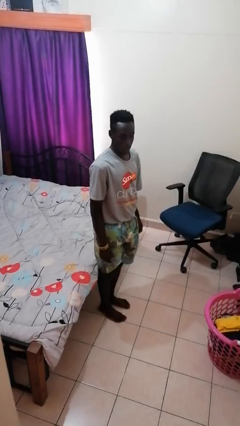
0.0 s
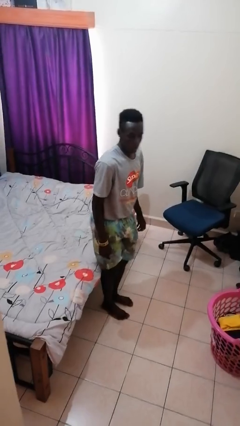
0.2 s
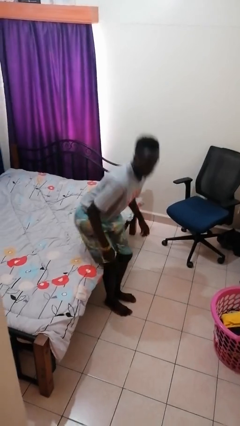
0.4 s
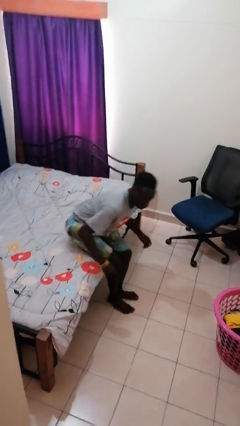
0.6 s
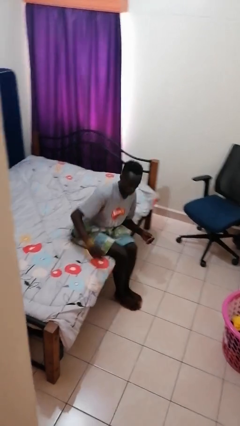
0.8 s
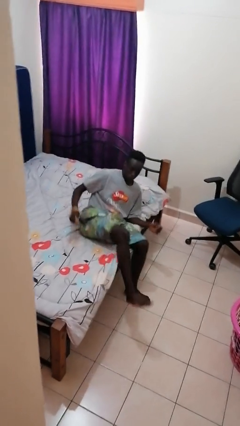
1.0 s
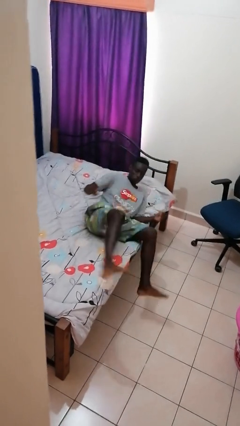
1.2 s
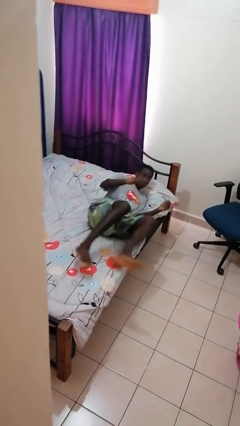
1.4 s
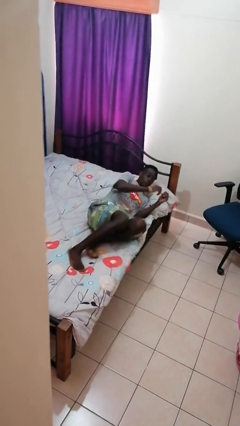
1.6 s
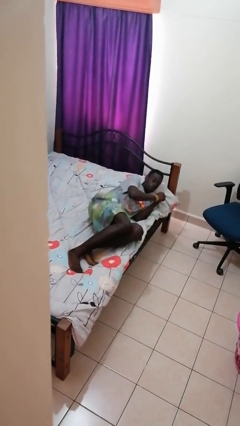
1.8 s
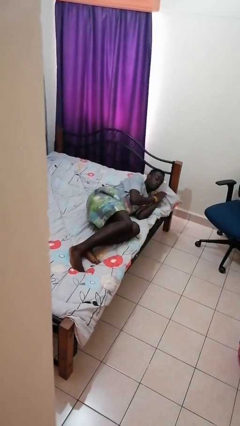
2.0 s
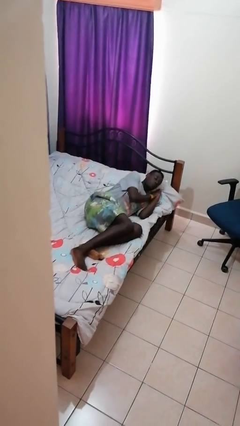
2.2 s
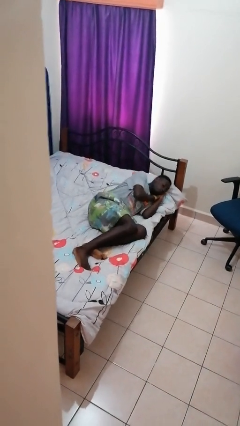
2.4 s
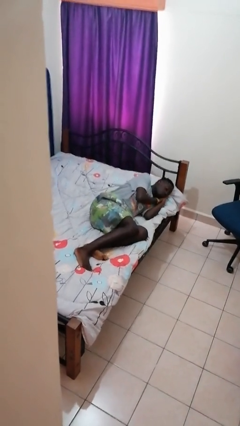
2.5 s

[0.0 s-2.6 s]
person lies down on bed

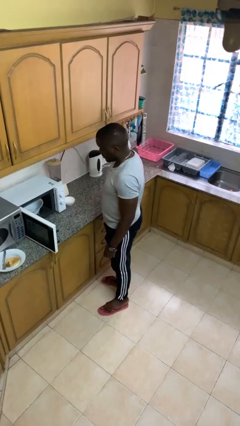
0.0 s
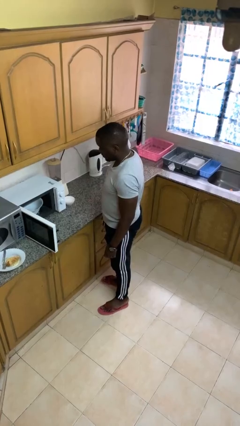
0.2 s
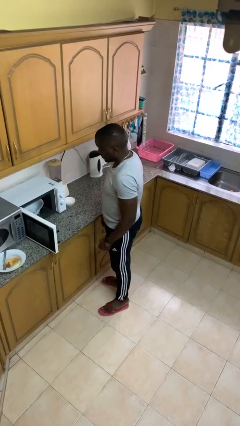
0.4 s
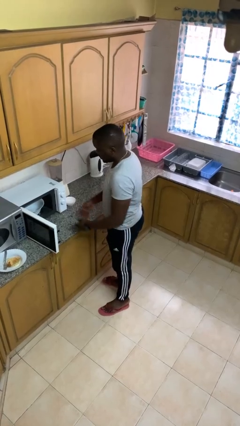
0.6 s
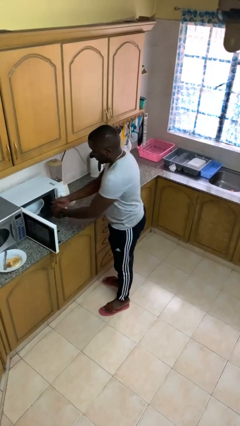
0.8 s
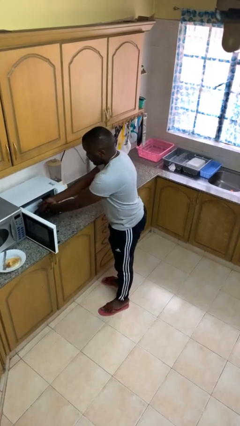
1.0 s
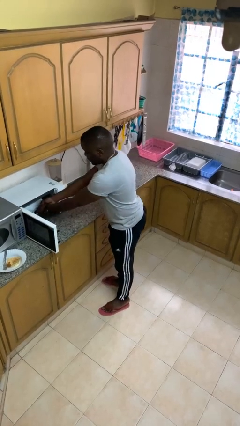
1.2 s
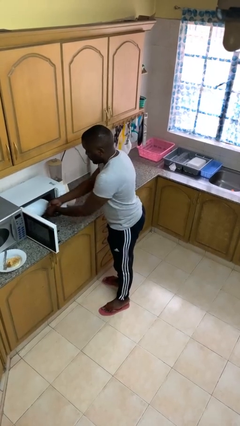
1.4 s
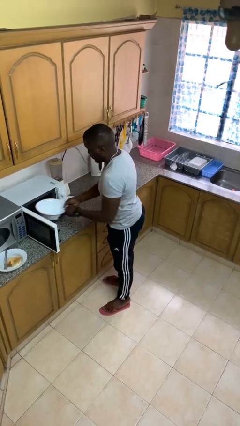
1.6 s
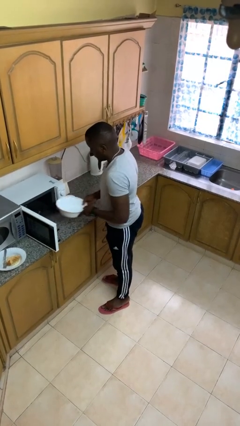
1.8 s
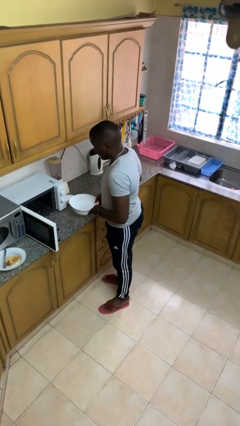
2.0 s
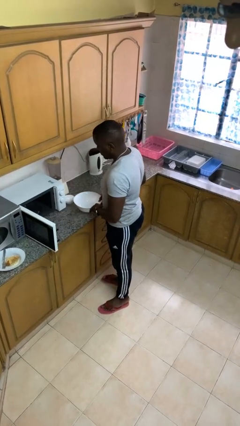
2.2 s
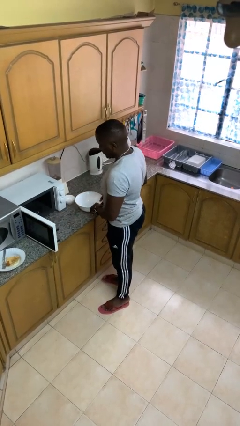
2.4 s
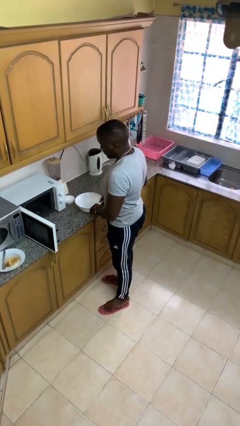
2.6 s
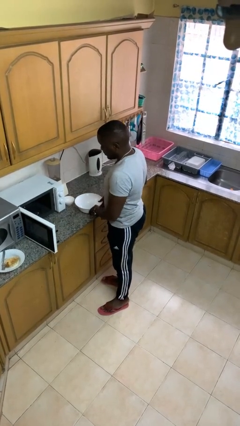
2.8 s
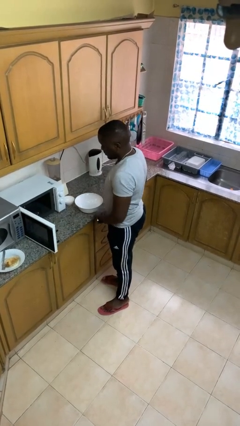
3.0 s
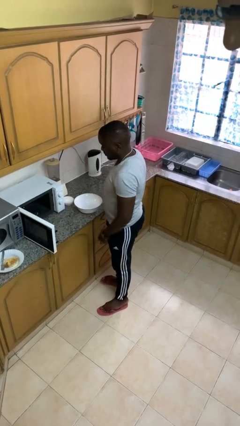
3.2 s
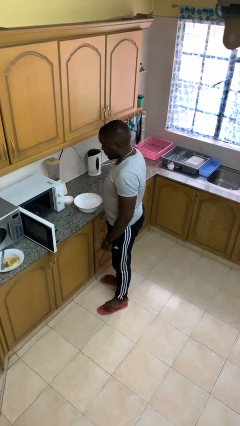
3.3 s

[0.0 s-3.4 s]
person takes object from microwave

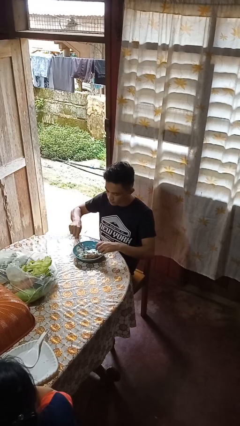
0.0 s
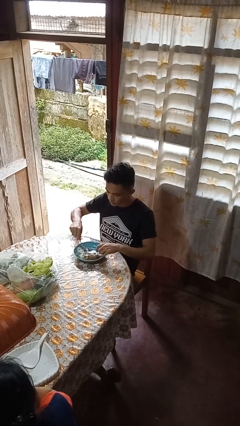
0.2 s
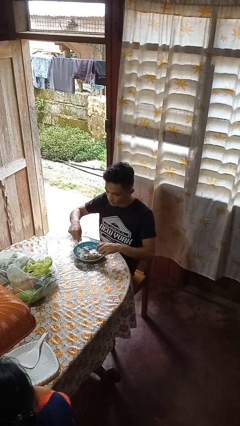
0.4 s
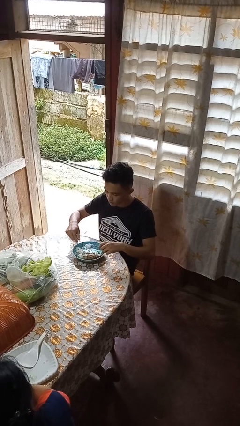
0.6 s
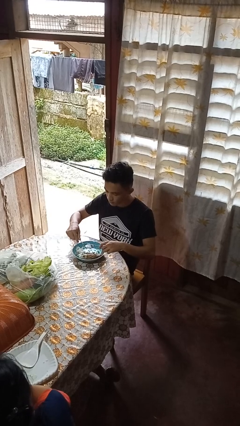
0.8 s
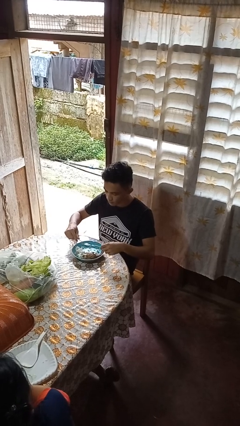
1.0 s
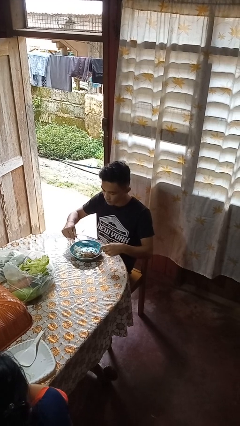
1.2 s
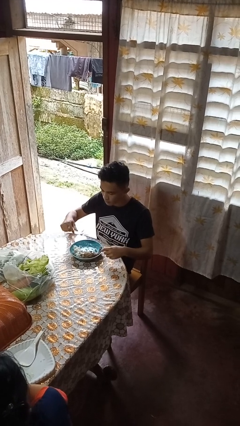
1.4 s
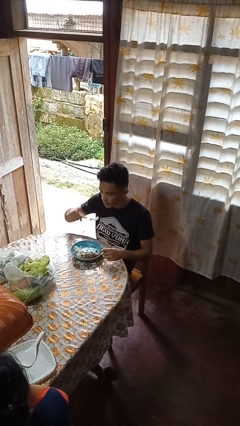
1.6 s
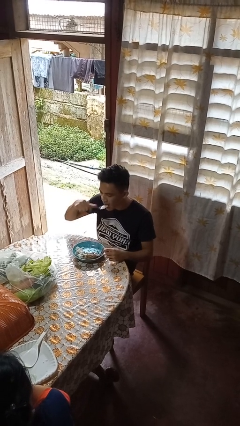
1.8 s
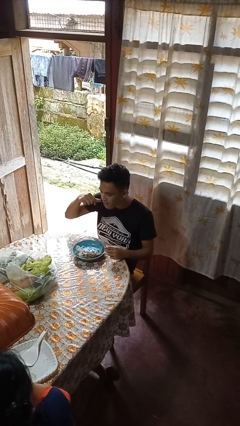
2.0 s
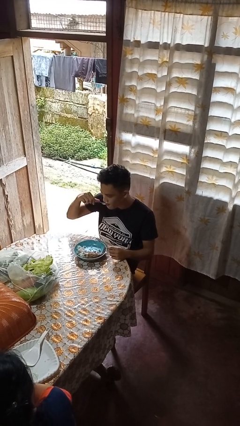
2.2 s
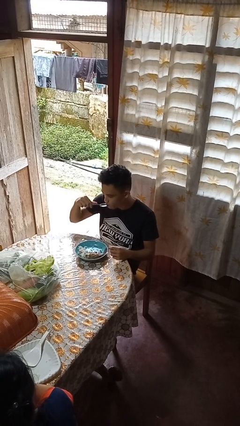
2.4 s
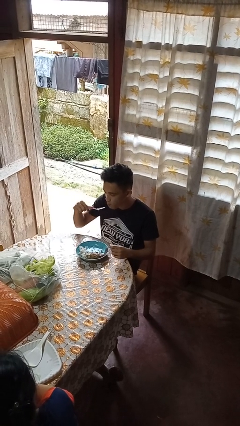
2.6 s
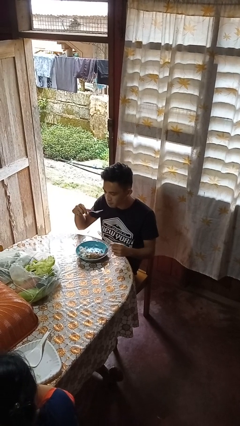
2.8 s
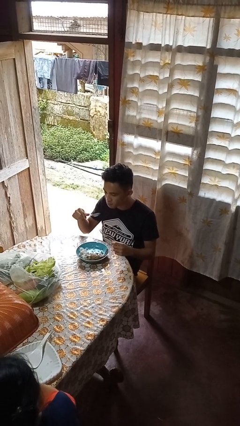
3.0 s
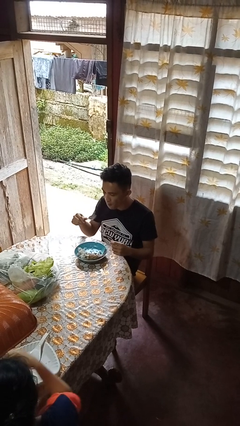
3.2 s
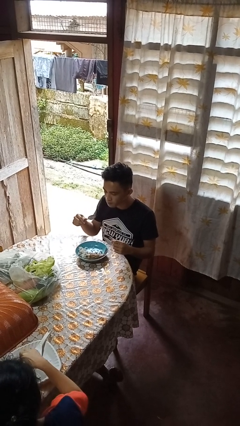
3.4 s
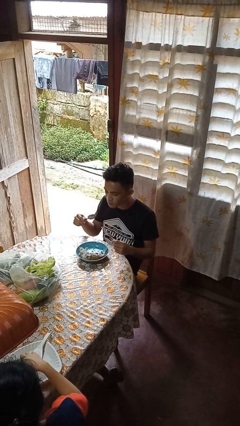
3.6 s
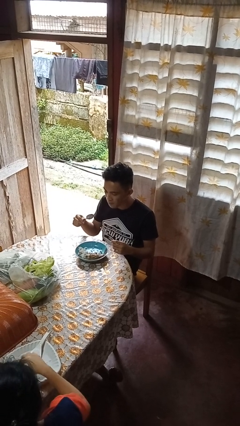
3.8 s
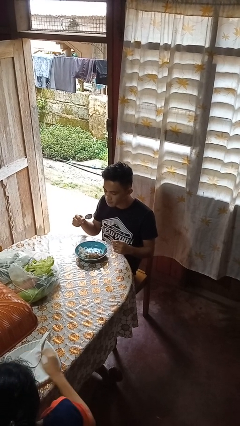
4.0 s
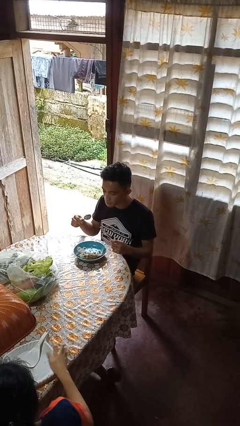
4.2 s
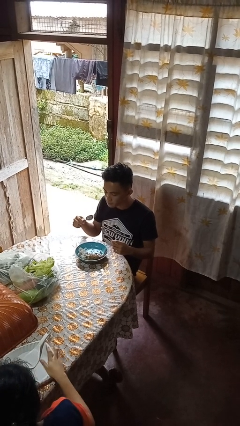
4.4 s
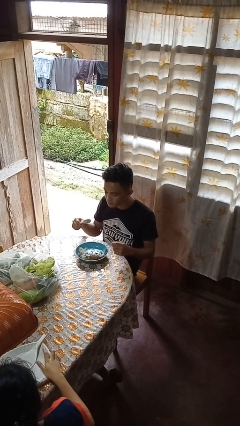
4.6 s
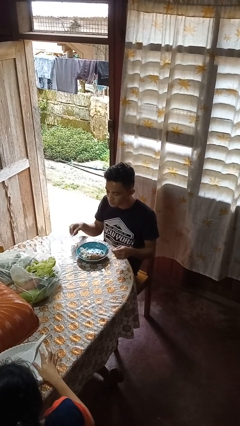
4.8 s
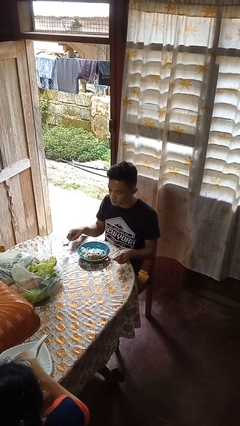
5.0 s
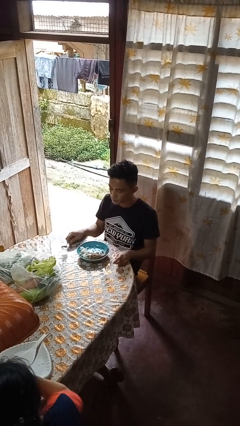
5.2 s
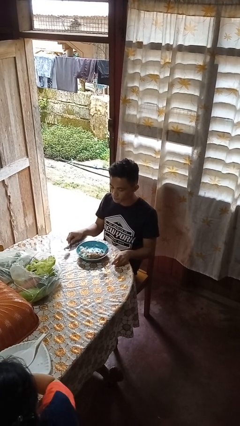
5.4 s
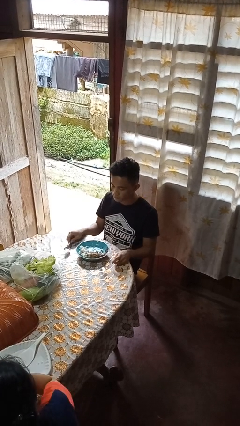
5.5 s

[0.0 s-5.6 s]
person eats with utensil

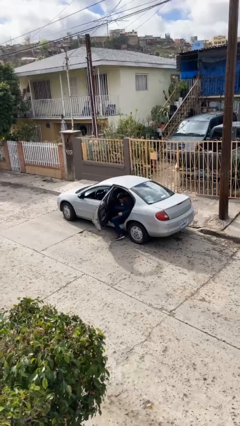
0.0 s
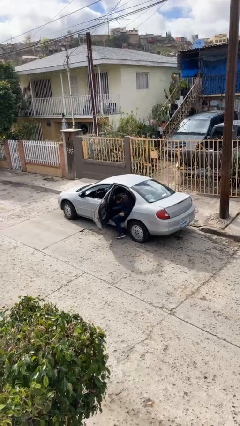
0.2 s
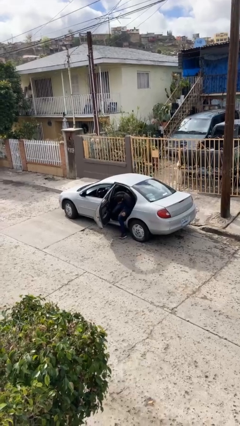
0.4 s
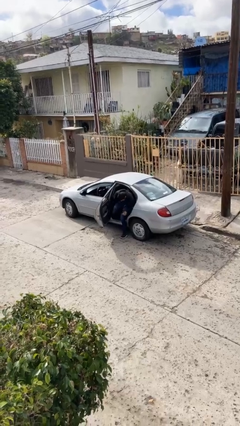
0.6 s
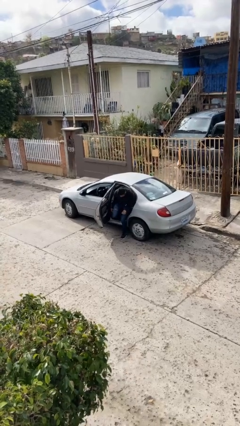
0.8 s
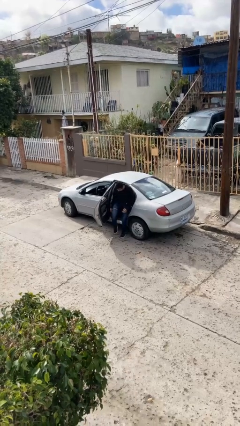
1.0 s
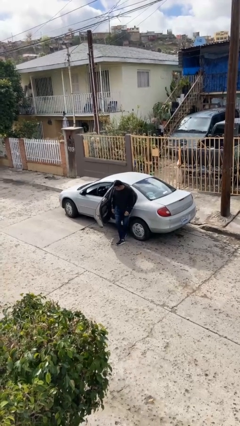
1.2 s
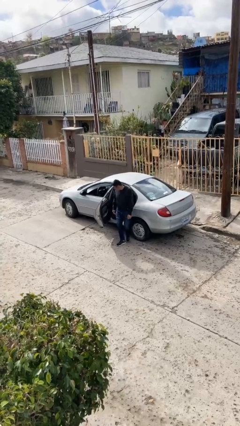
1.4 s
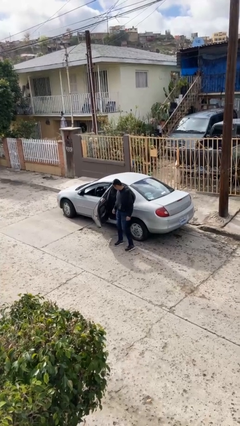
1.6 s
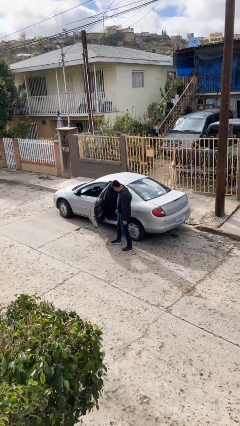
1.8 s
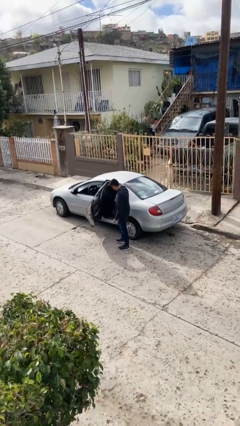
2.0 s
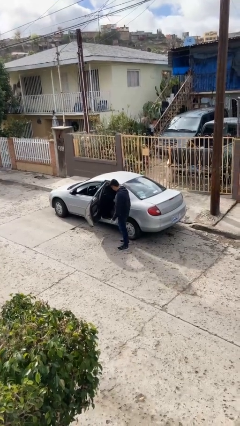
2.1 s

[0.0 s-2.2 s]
person exits car

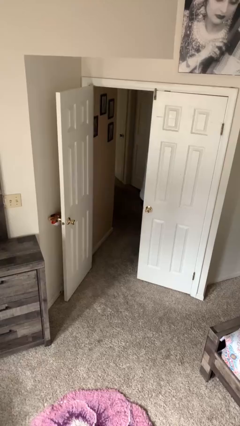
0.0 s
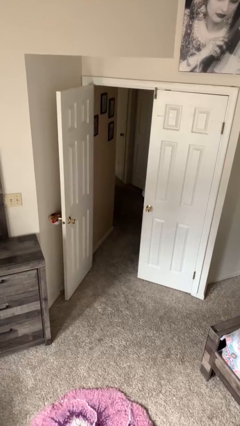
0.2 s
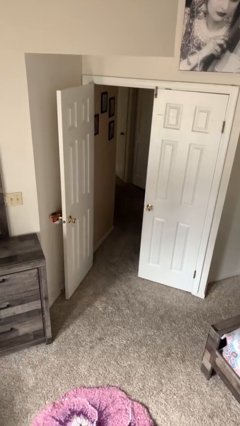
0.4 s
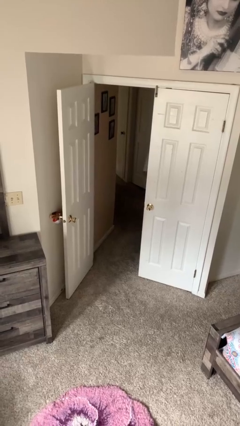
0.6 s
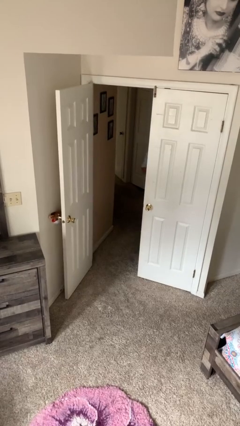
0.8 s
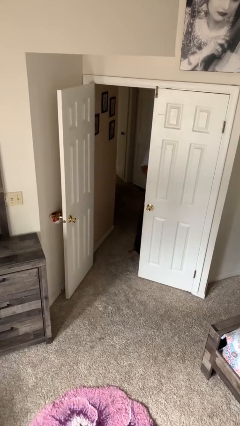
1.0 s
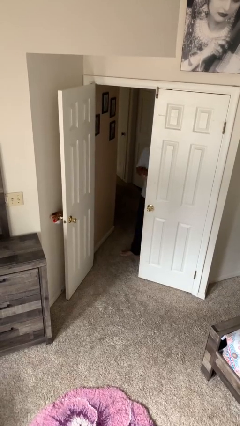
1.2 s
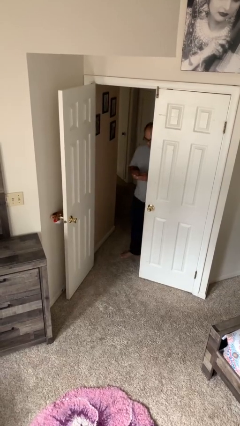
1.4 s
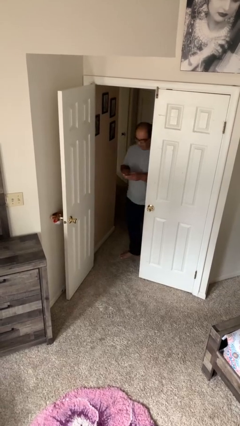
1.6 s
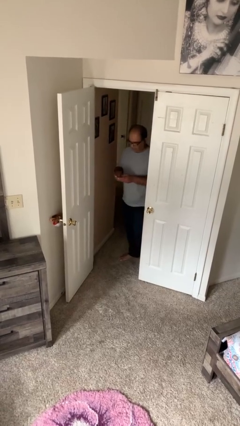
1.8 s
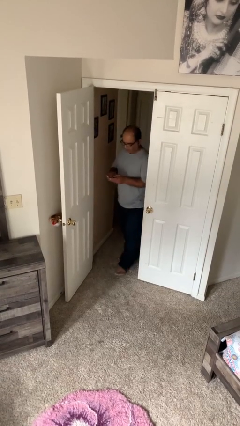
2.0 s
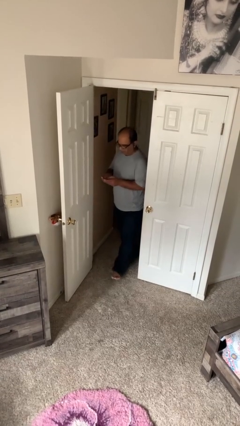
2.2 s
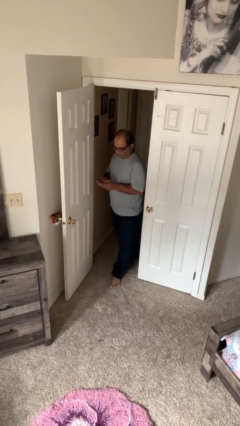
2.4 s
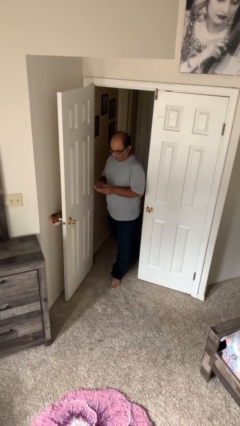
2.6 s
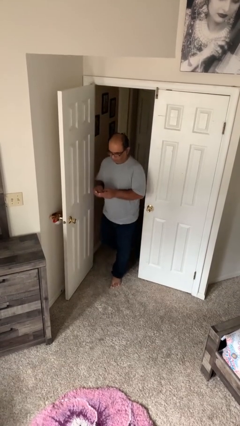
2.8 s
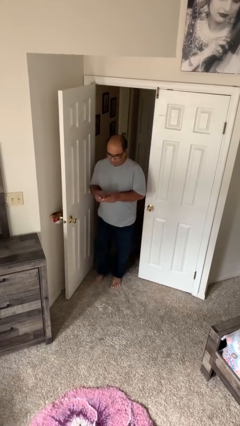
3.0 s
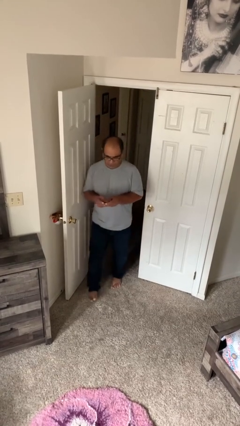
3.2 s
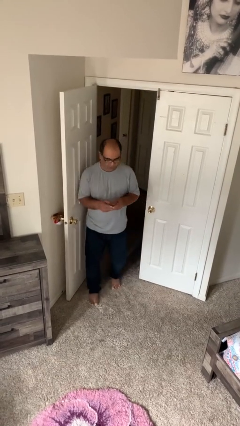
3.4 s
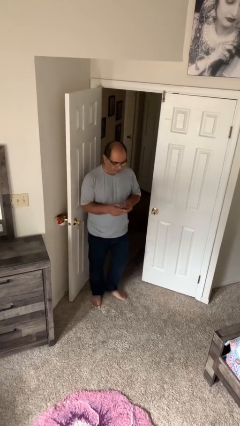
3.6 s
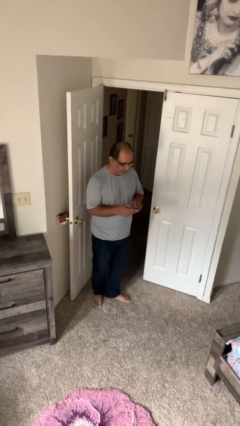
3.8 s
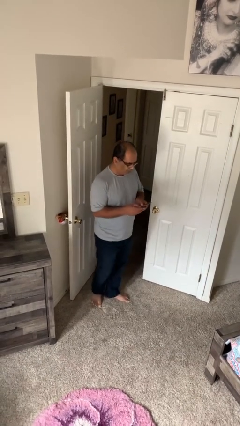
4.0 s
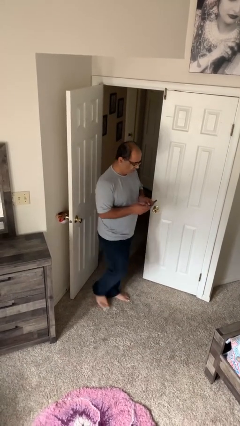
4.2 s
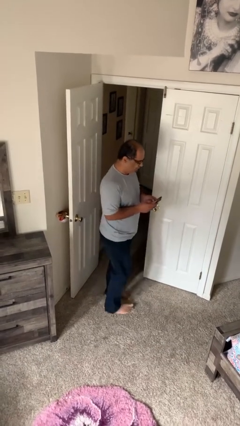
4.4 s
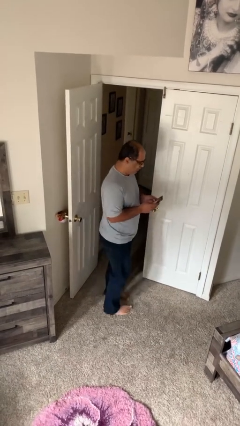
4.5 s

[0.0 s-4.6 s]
person enters scene through structure
